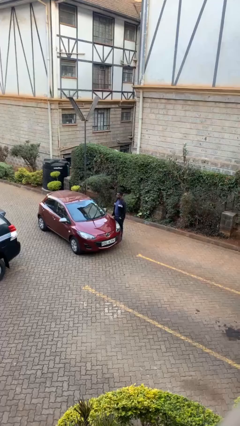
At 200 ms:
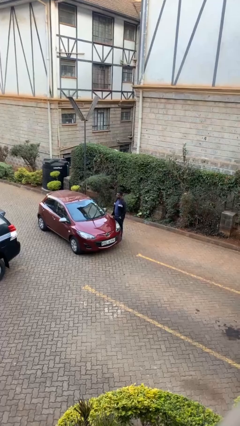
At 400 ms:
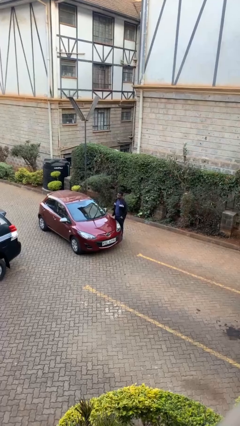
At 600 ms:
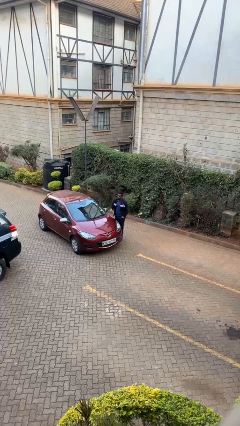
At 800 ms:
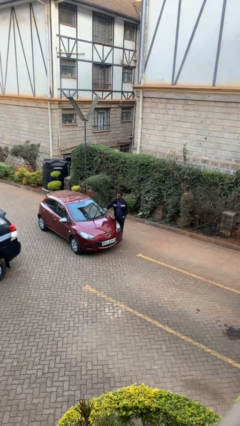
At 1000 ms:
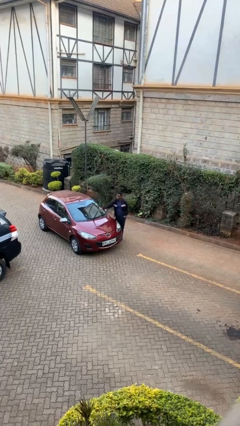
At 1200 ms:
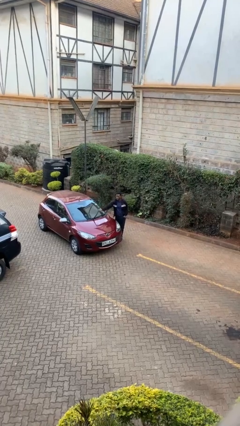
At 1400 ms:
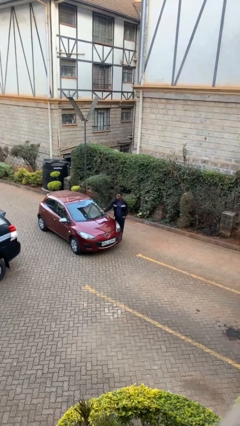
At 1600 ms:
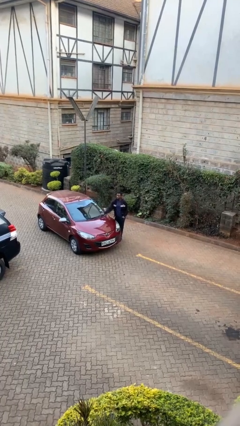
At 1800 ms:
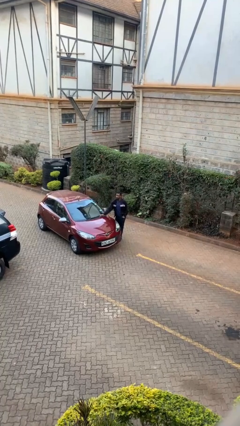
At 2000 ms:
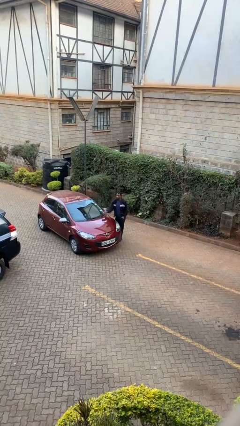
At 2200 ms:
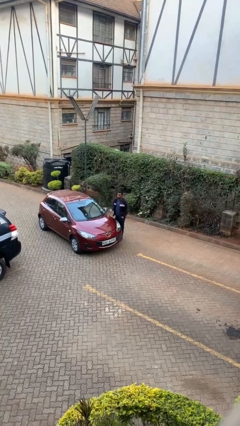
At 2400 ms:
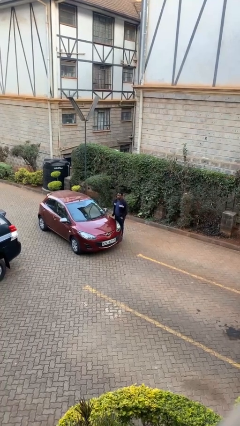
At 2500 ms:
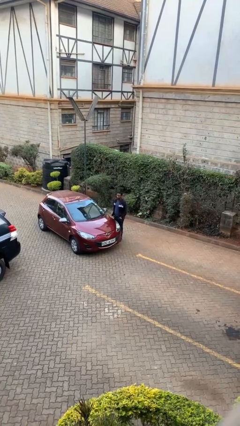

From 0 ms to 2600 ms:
person flips down car wipers

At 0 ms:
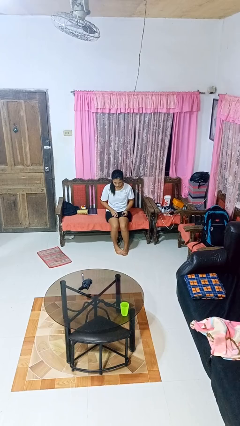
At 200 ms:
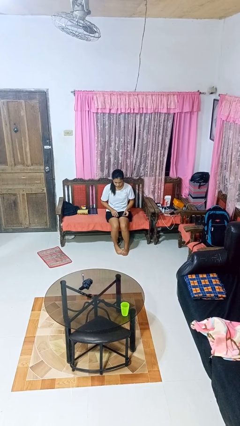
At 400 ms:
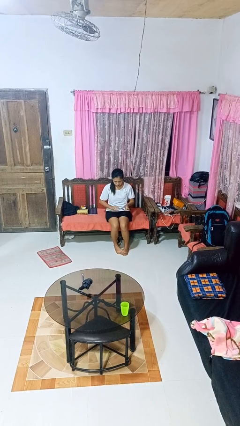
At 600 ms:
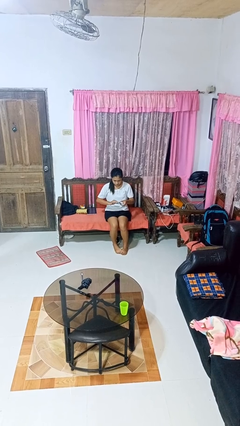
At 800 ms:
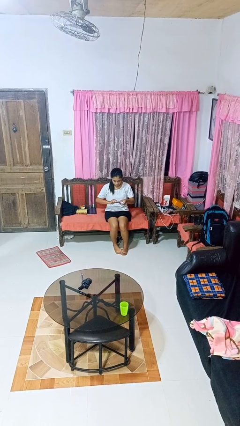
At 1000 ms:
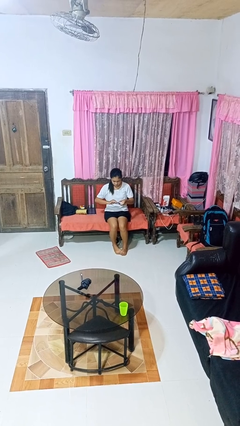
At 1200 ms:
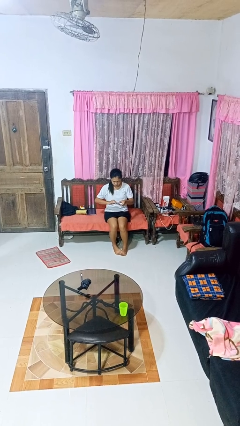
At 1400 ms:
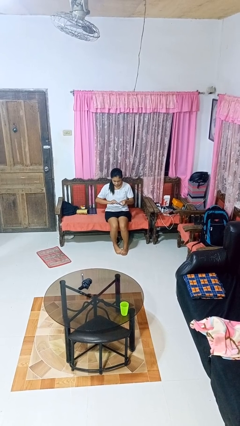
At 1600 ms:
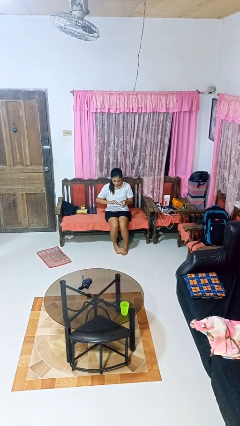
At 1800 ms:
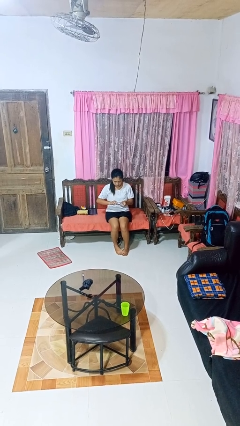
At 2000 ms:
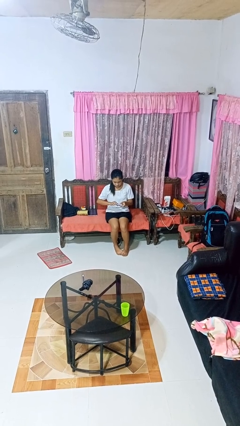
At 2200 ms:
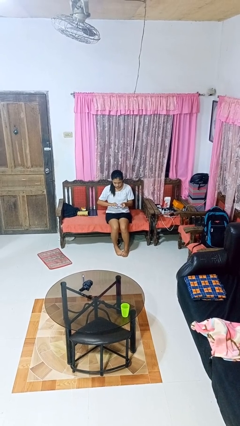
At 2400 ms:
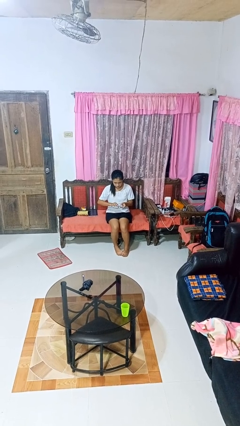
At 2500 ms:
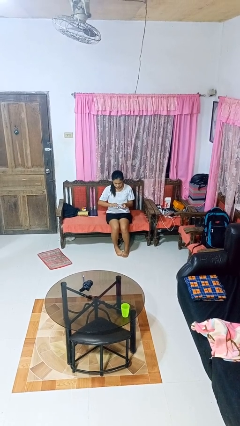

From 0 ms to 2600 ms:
person clips fingernails

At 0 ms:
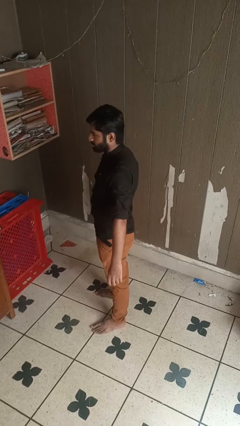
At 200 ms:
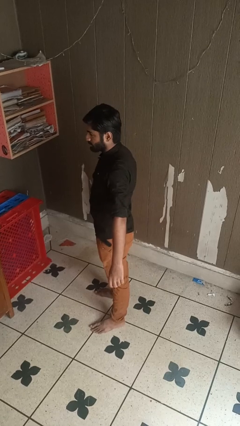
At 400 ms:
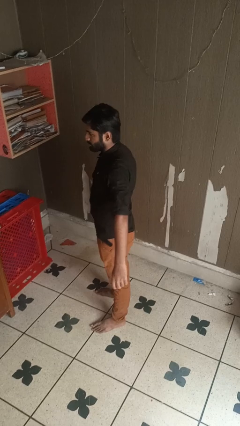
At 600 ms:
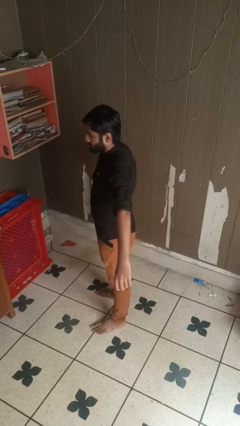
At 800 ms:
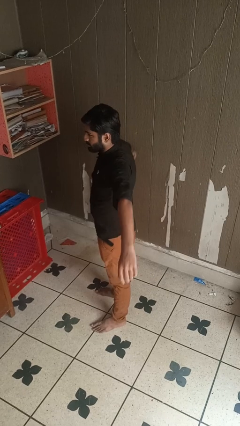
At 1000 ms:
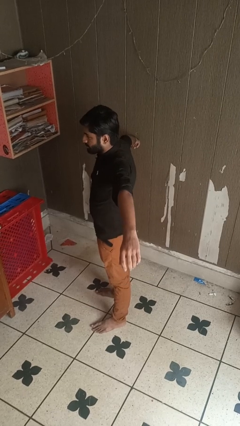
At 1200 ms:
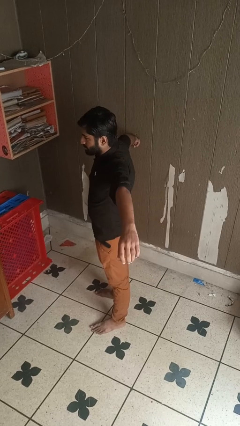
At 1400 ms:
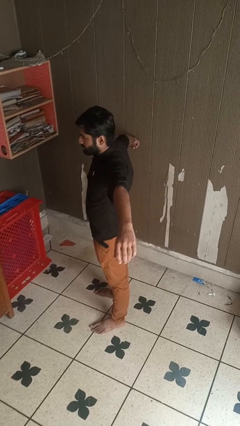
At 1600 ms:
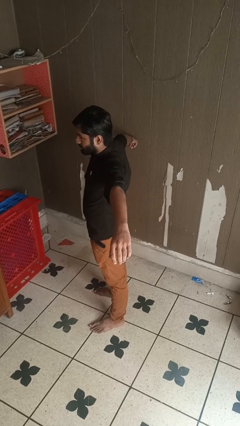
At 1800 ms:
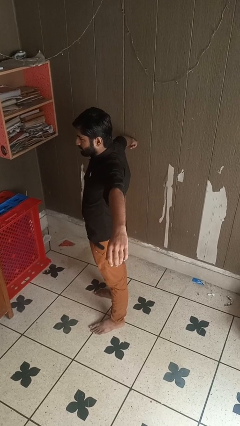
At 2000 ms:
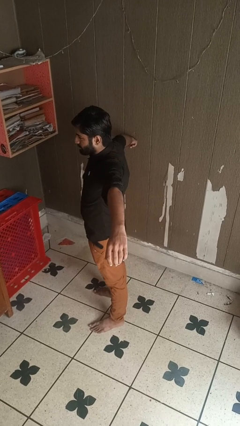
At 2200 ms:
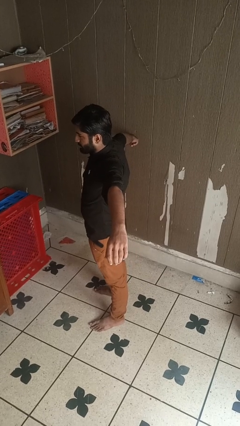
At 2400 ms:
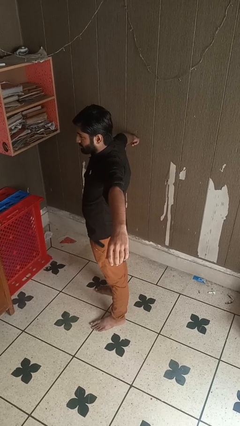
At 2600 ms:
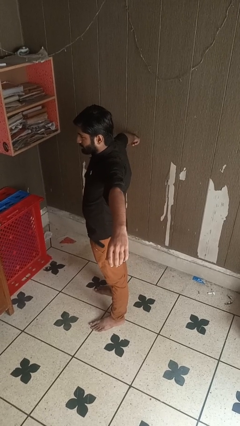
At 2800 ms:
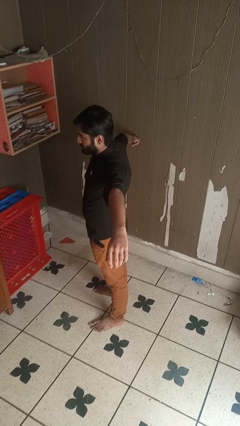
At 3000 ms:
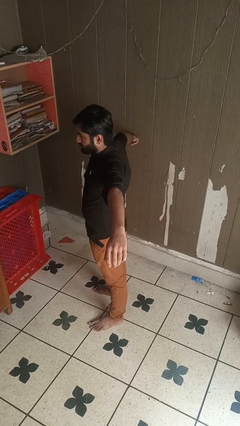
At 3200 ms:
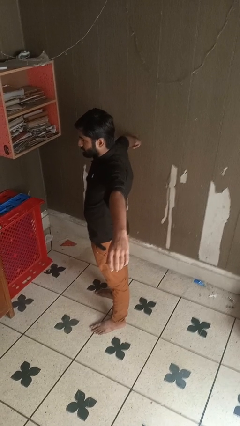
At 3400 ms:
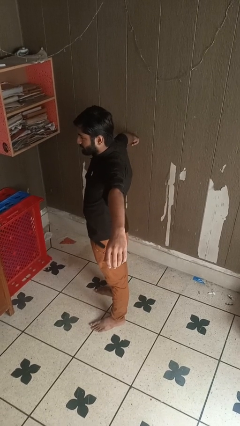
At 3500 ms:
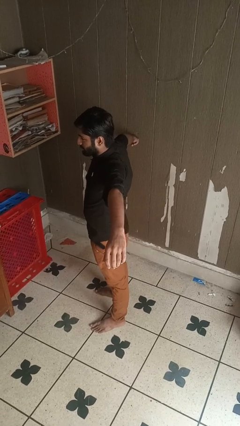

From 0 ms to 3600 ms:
person stretches arms to side

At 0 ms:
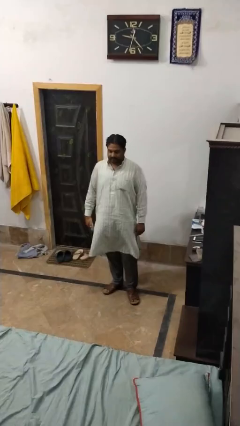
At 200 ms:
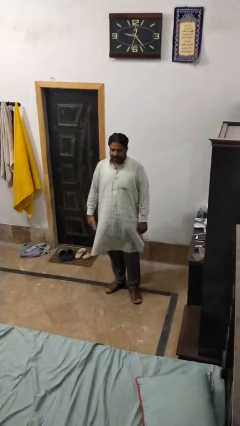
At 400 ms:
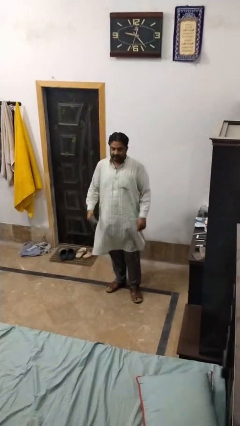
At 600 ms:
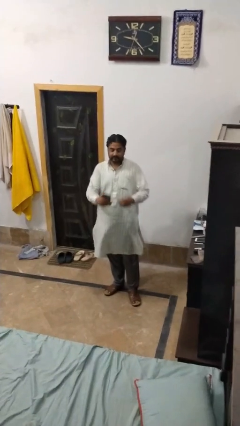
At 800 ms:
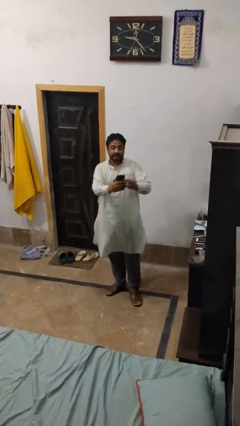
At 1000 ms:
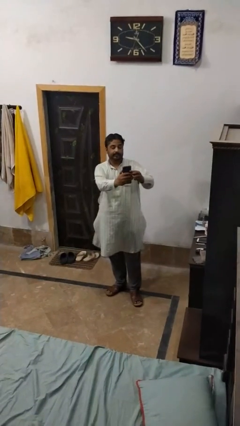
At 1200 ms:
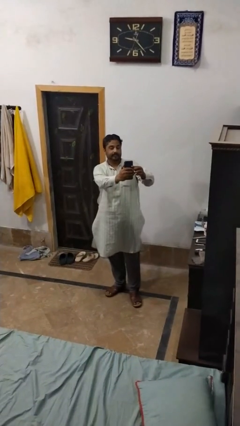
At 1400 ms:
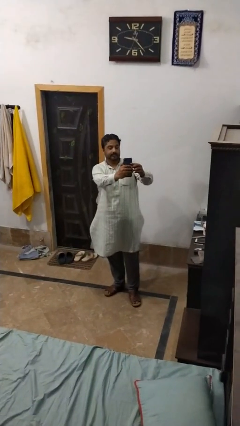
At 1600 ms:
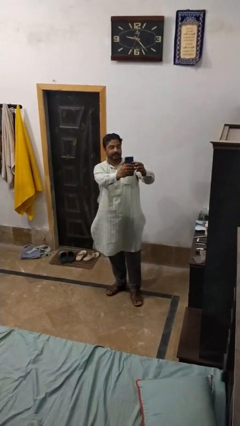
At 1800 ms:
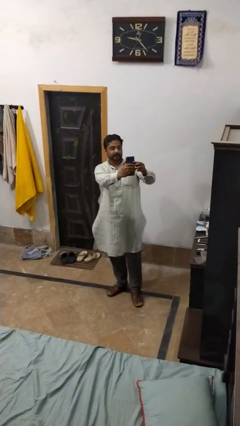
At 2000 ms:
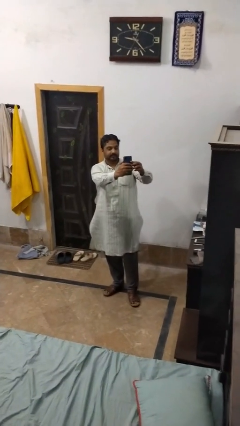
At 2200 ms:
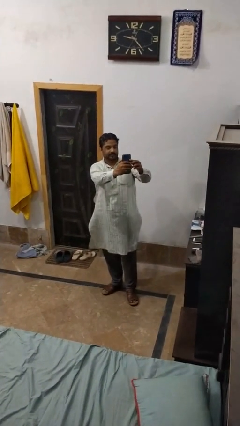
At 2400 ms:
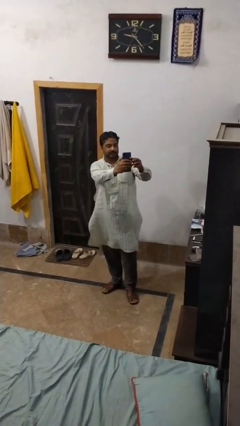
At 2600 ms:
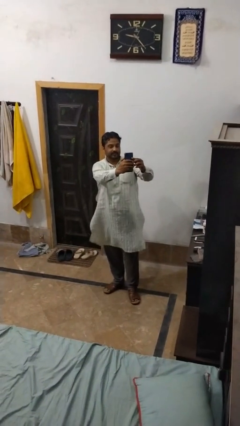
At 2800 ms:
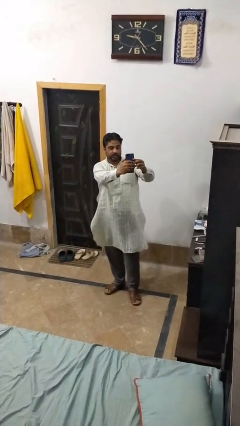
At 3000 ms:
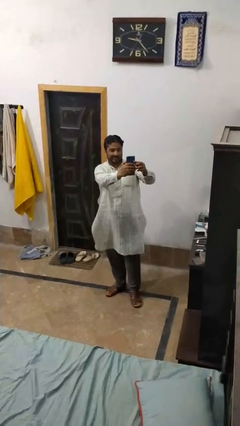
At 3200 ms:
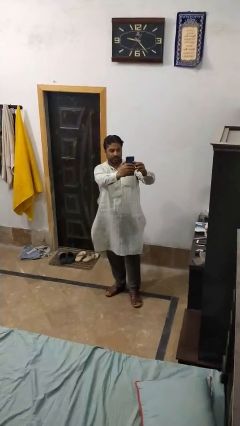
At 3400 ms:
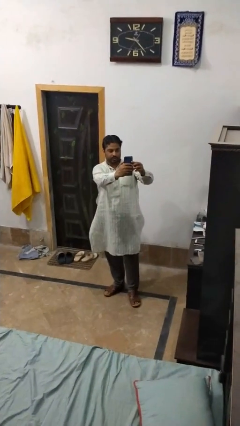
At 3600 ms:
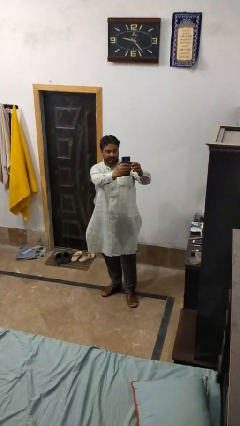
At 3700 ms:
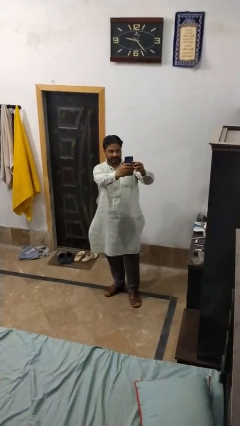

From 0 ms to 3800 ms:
person takes selfie

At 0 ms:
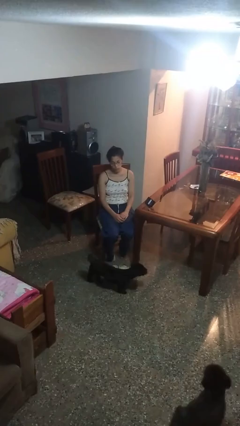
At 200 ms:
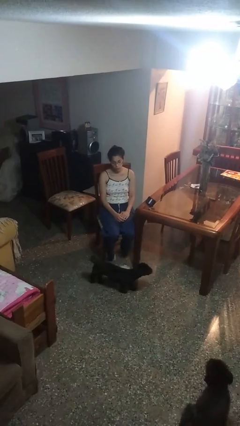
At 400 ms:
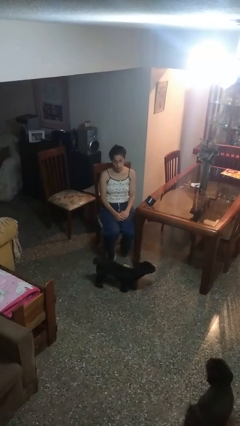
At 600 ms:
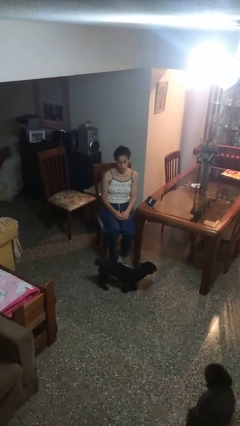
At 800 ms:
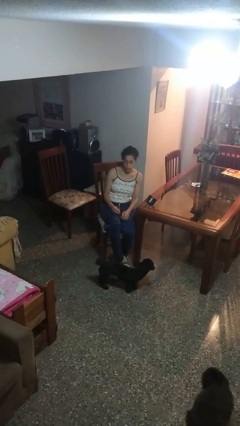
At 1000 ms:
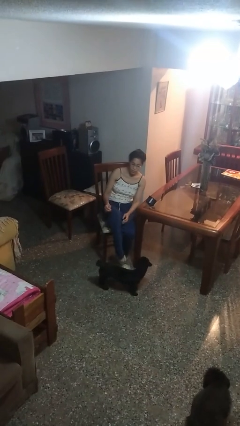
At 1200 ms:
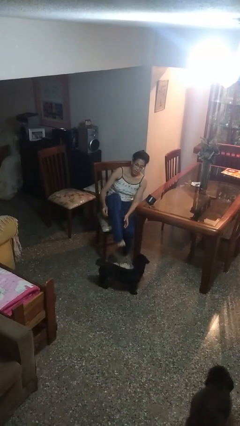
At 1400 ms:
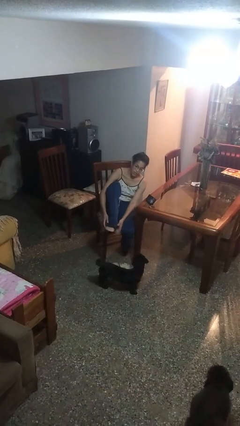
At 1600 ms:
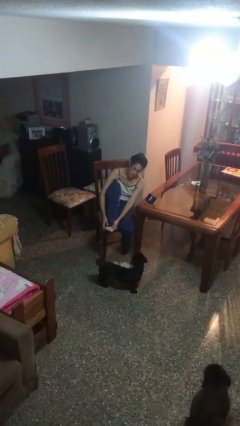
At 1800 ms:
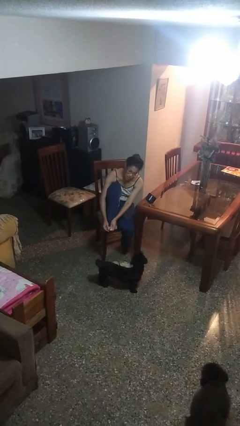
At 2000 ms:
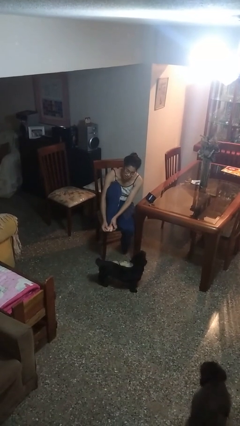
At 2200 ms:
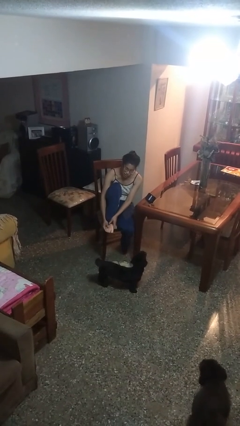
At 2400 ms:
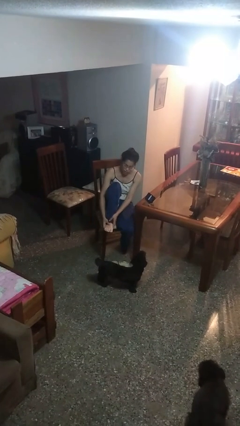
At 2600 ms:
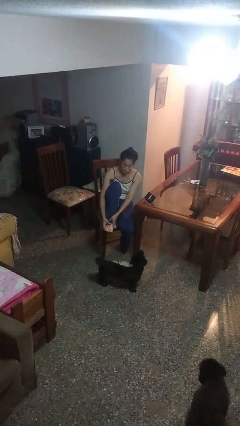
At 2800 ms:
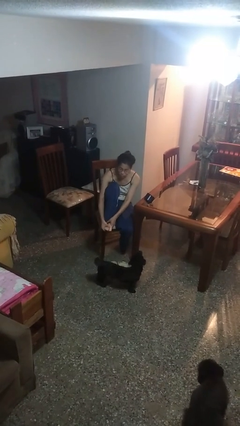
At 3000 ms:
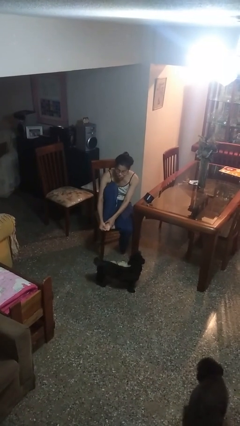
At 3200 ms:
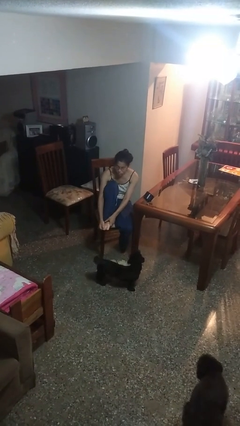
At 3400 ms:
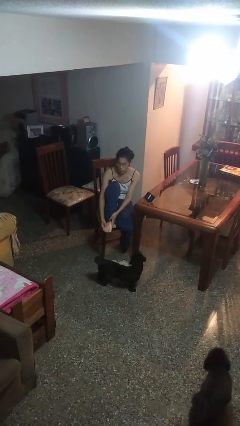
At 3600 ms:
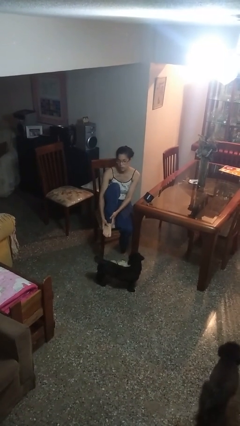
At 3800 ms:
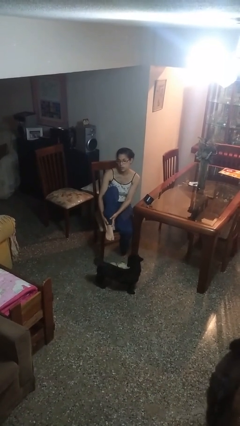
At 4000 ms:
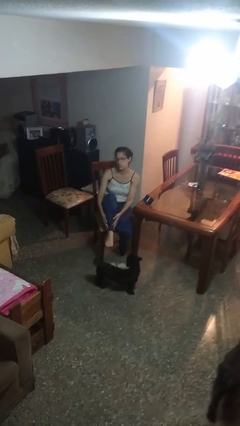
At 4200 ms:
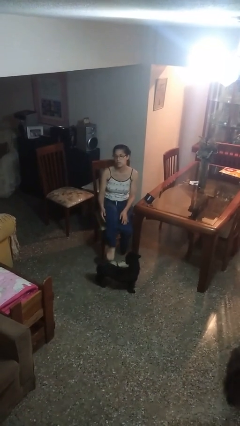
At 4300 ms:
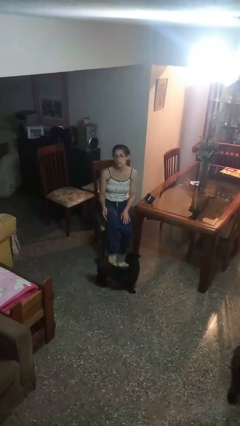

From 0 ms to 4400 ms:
person rubs foot

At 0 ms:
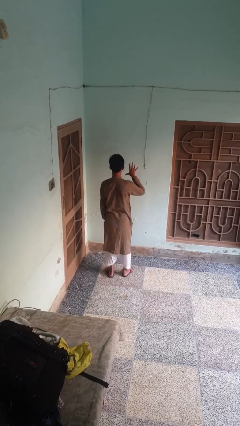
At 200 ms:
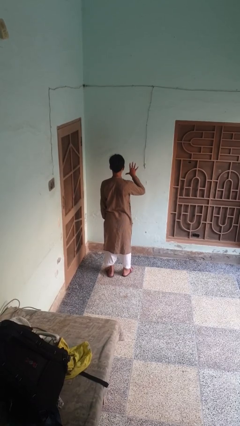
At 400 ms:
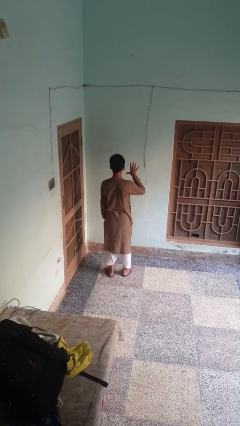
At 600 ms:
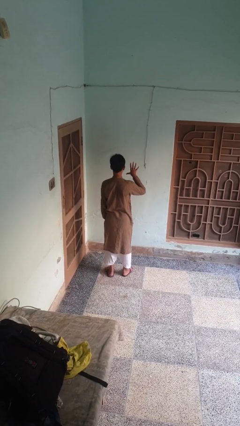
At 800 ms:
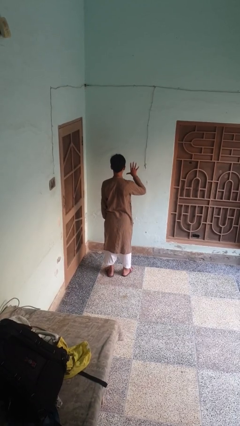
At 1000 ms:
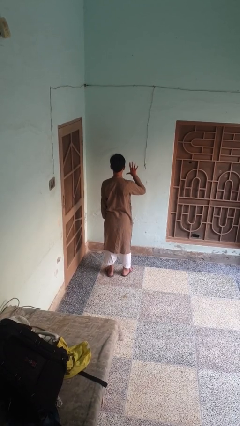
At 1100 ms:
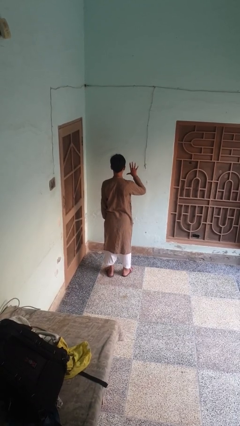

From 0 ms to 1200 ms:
person gestures number five
